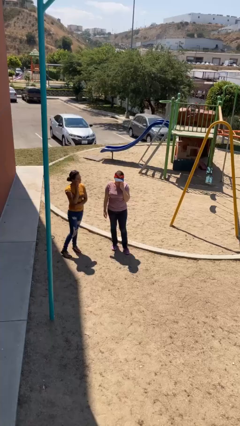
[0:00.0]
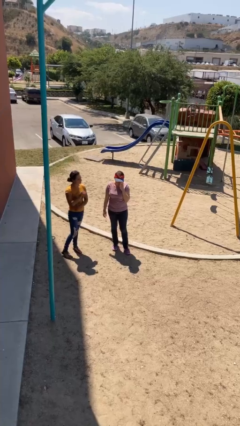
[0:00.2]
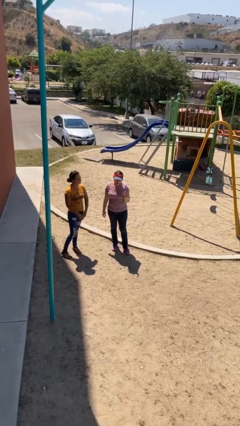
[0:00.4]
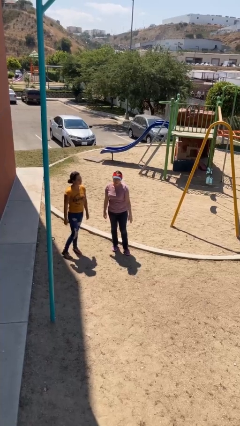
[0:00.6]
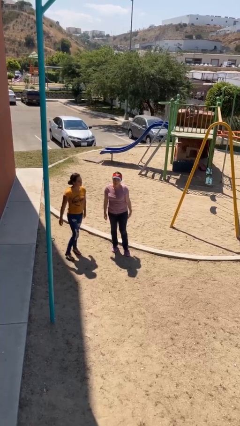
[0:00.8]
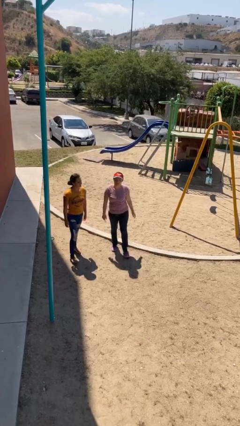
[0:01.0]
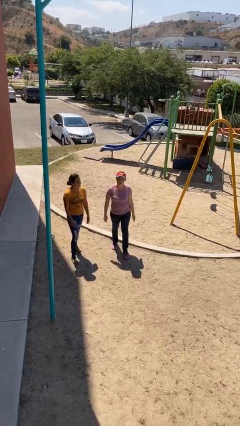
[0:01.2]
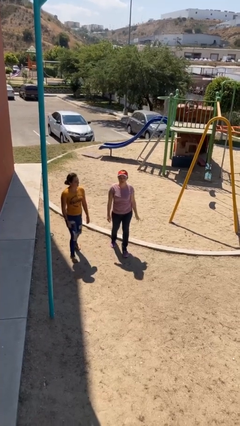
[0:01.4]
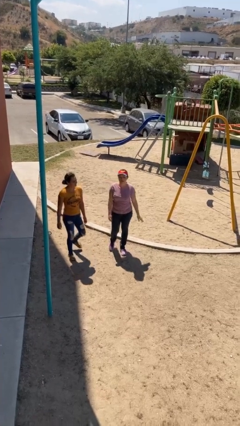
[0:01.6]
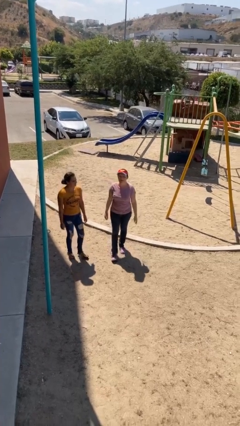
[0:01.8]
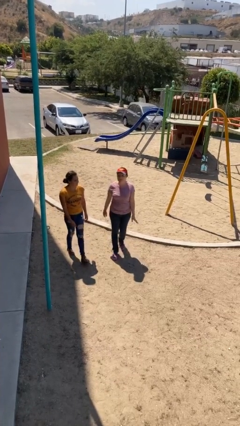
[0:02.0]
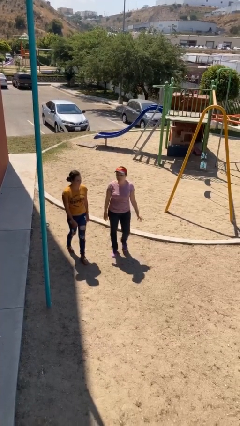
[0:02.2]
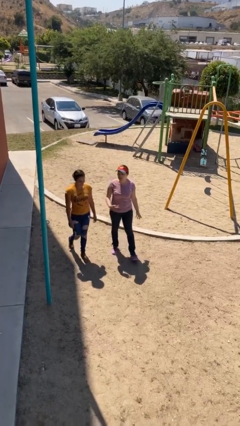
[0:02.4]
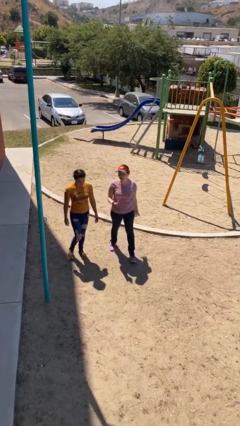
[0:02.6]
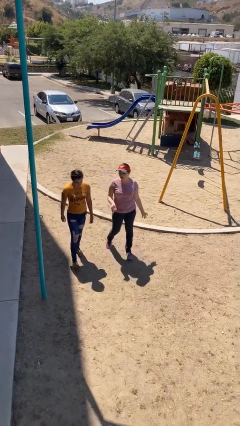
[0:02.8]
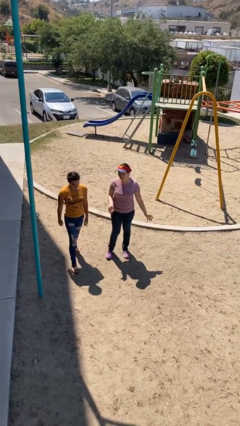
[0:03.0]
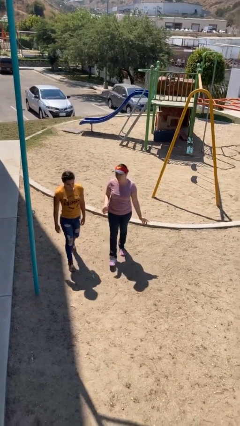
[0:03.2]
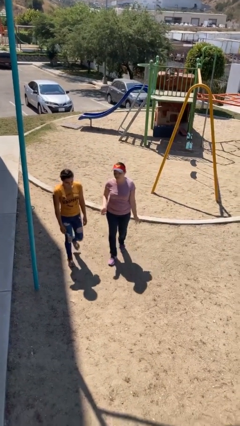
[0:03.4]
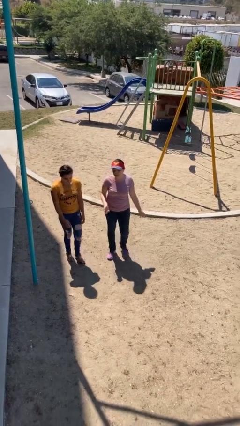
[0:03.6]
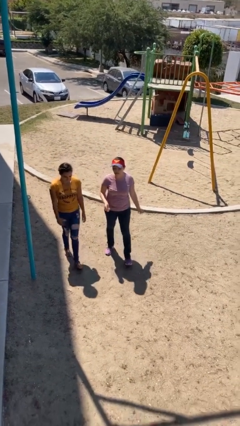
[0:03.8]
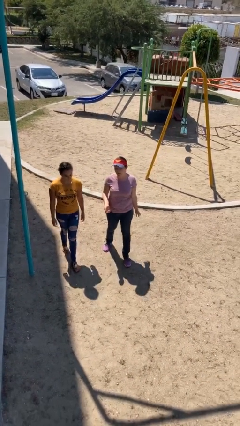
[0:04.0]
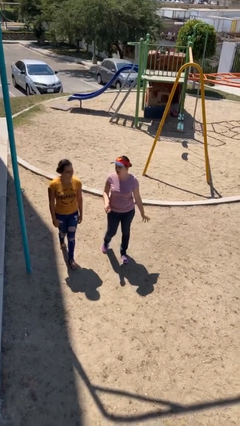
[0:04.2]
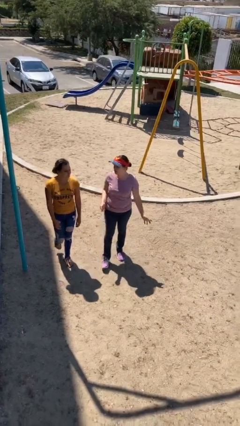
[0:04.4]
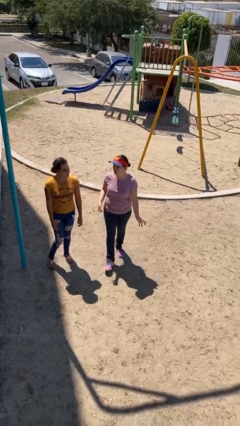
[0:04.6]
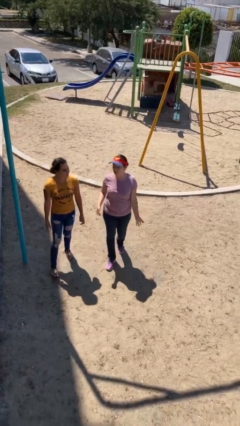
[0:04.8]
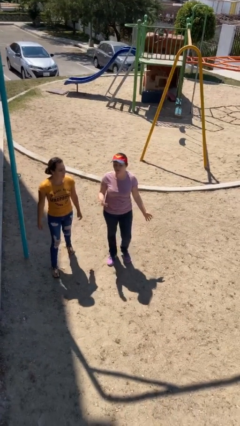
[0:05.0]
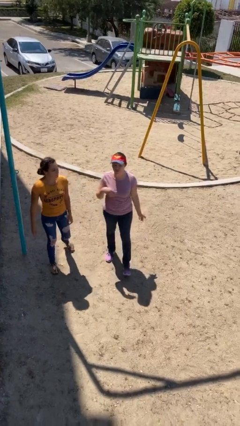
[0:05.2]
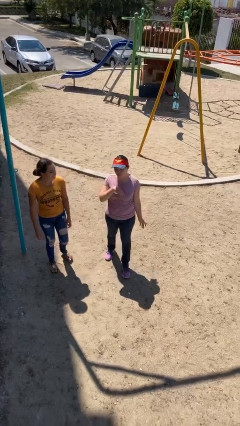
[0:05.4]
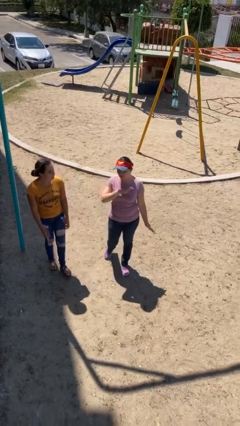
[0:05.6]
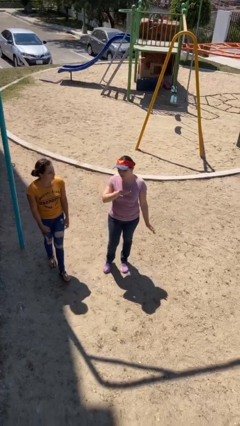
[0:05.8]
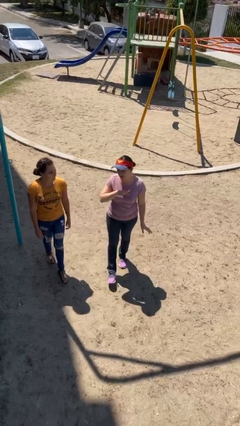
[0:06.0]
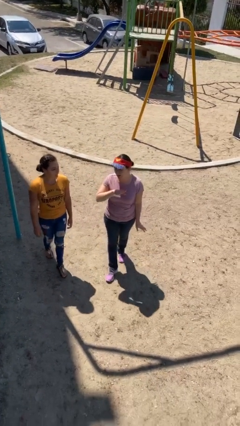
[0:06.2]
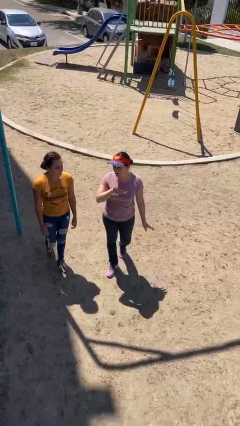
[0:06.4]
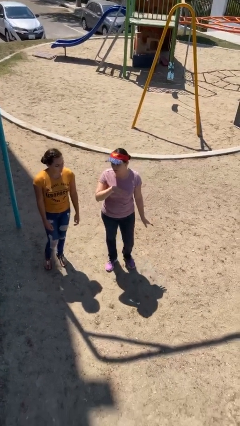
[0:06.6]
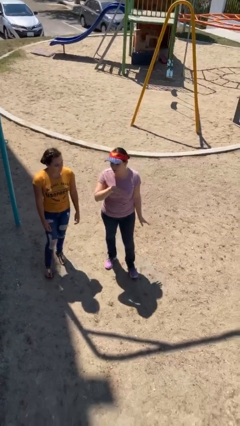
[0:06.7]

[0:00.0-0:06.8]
person talks to person

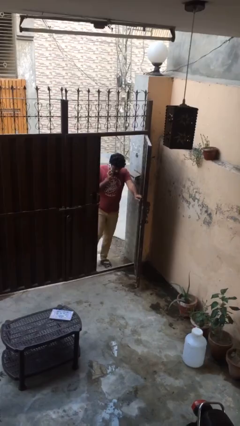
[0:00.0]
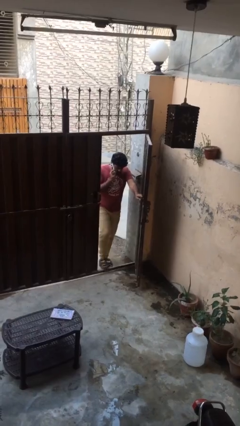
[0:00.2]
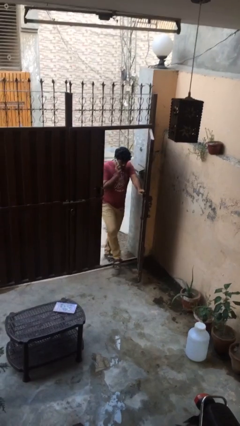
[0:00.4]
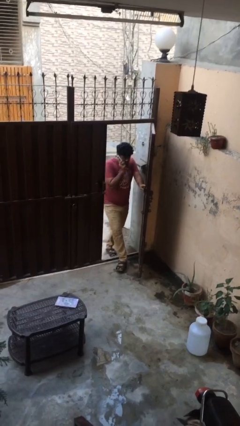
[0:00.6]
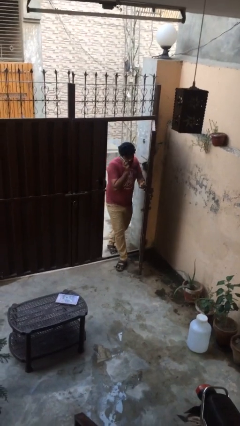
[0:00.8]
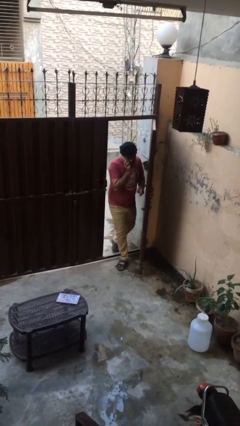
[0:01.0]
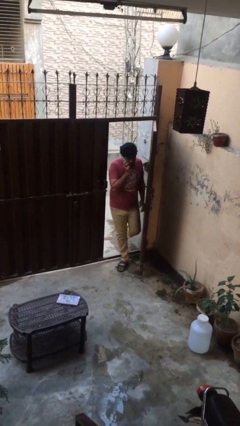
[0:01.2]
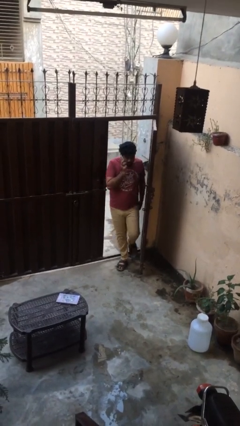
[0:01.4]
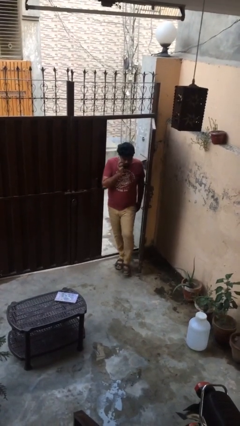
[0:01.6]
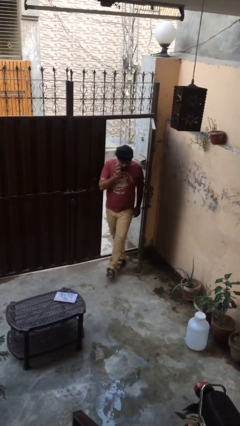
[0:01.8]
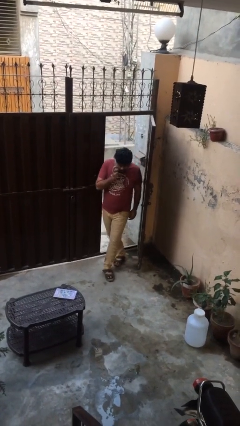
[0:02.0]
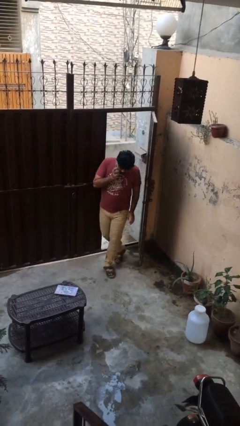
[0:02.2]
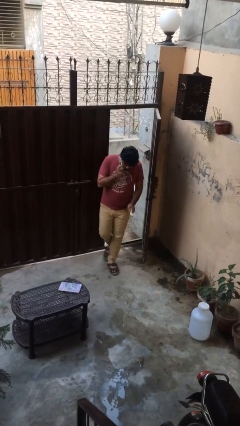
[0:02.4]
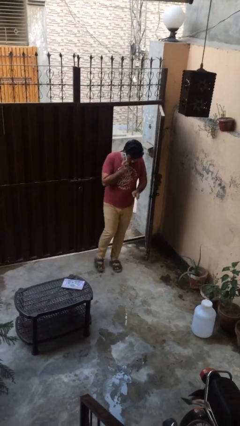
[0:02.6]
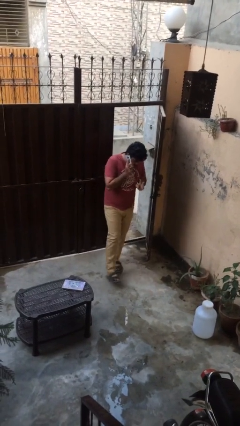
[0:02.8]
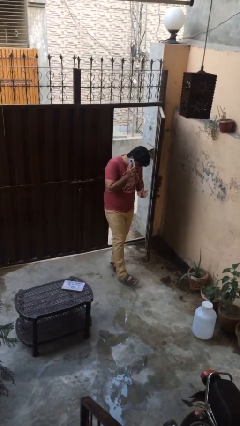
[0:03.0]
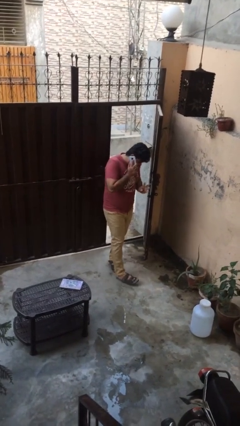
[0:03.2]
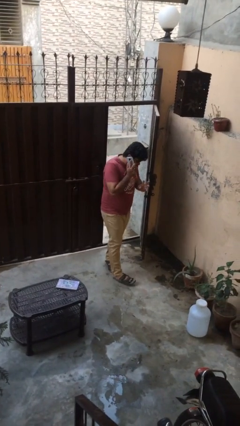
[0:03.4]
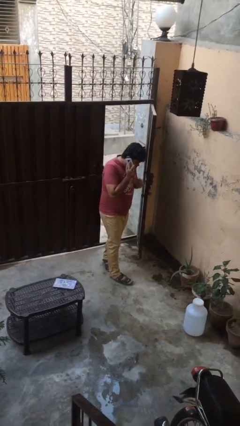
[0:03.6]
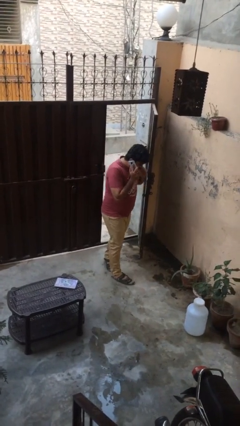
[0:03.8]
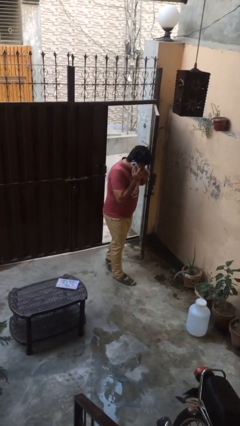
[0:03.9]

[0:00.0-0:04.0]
person enters scene through structure

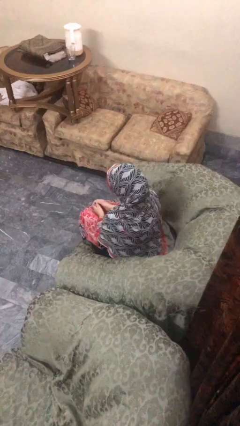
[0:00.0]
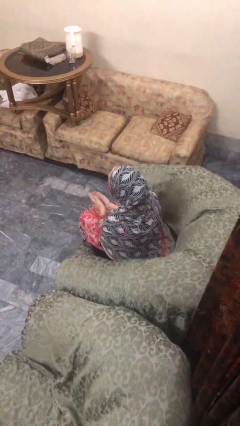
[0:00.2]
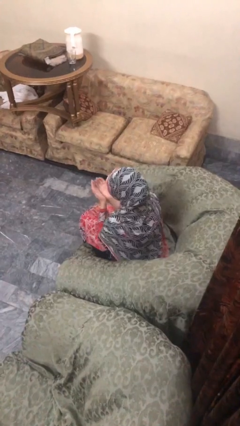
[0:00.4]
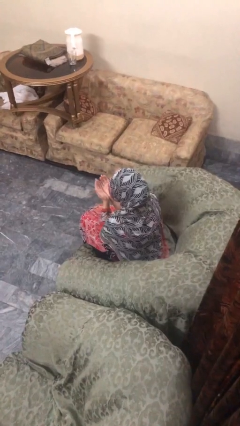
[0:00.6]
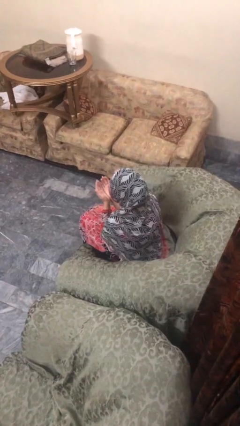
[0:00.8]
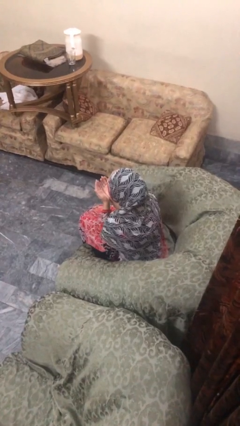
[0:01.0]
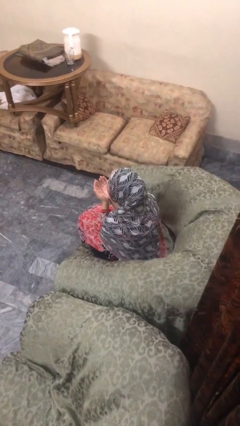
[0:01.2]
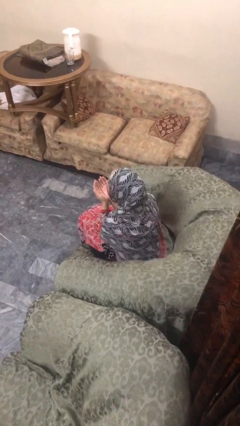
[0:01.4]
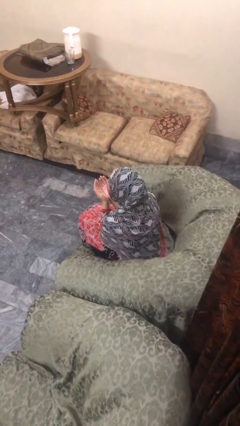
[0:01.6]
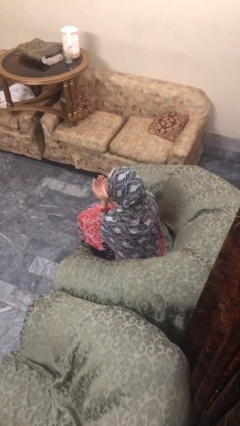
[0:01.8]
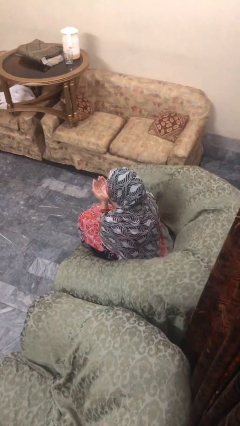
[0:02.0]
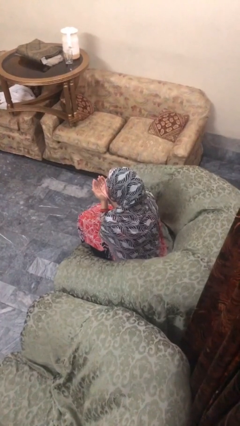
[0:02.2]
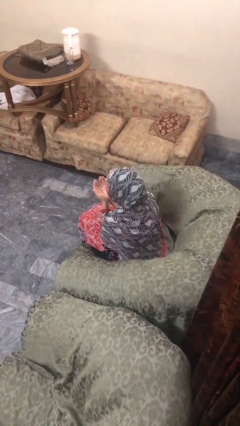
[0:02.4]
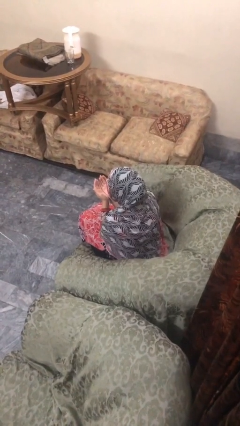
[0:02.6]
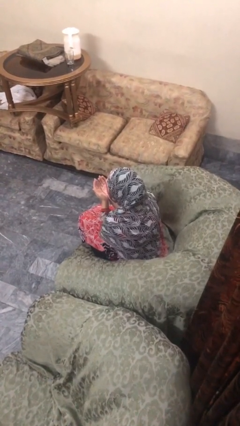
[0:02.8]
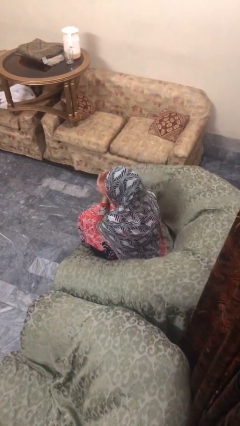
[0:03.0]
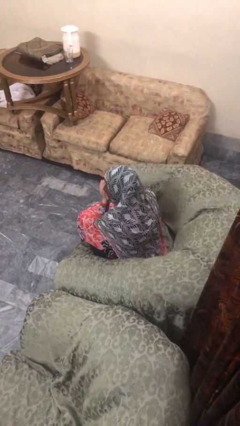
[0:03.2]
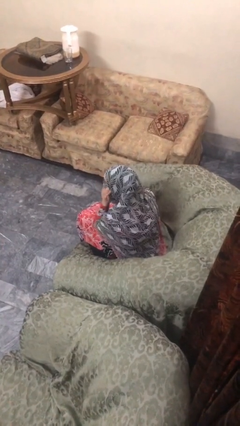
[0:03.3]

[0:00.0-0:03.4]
person prays

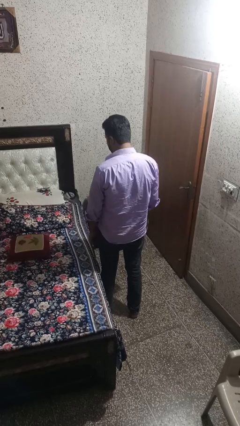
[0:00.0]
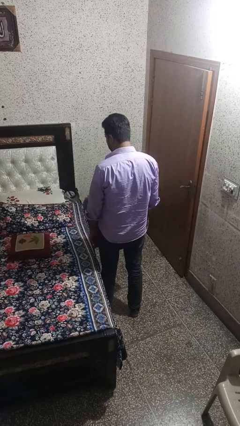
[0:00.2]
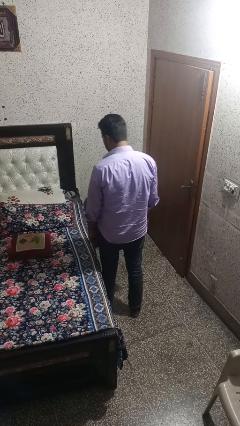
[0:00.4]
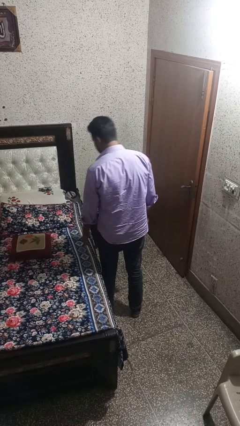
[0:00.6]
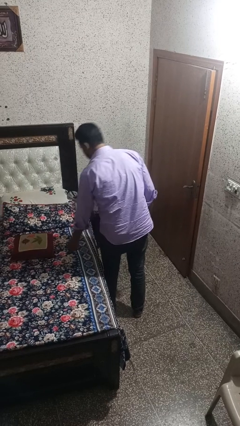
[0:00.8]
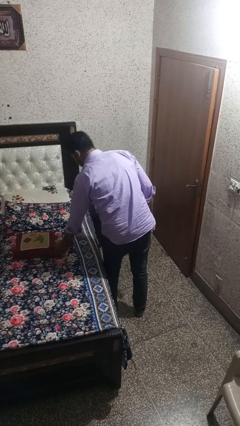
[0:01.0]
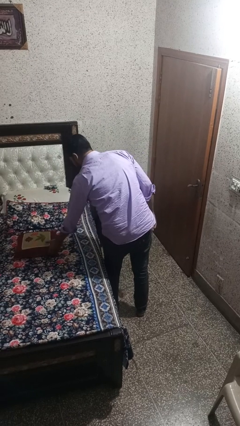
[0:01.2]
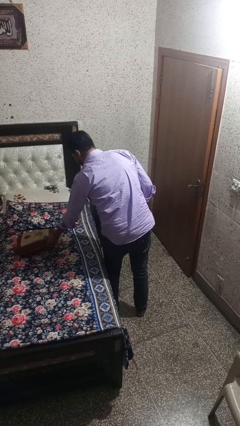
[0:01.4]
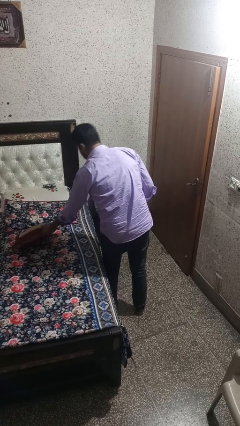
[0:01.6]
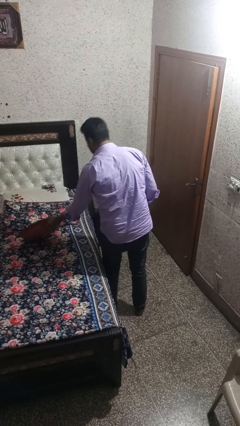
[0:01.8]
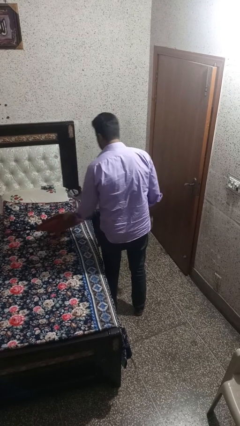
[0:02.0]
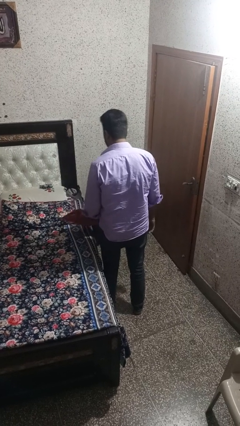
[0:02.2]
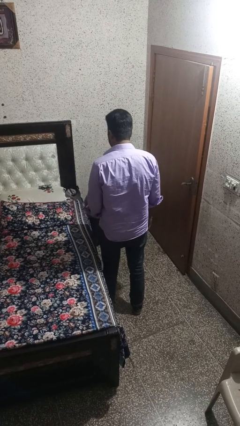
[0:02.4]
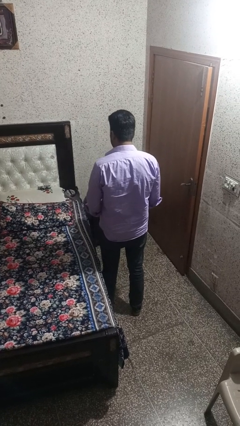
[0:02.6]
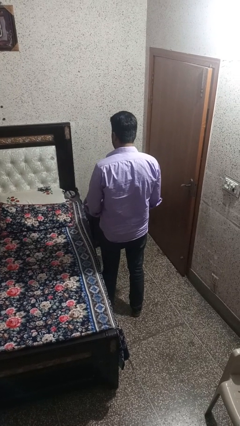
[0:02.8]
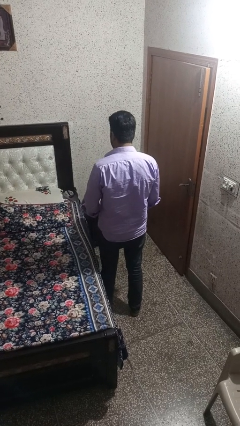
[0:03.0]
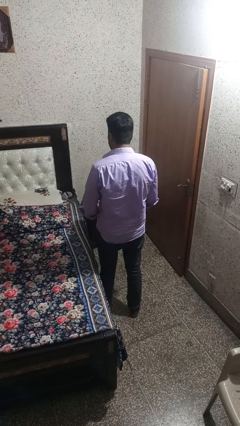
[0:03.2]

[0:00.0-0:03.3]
person picks up object from bed
